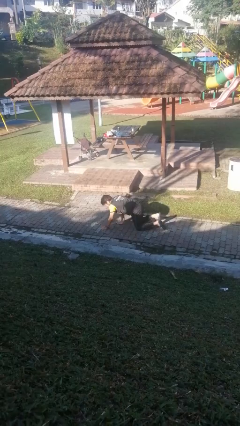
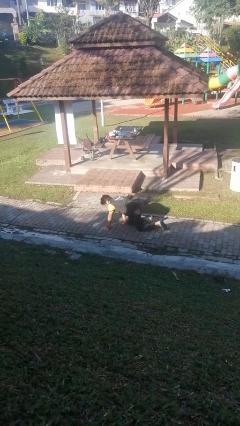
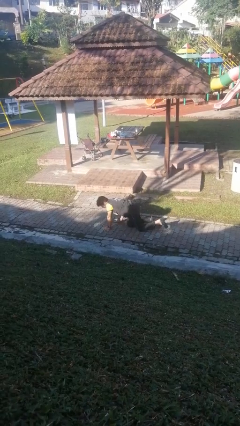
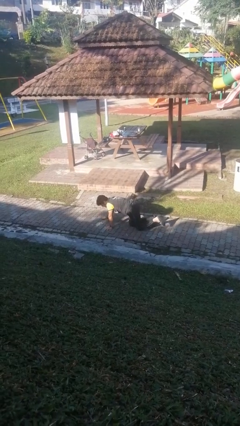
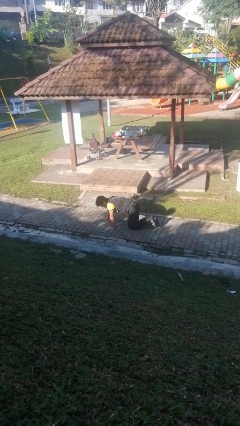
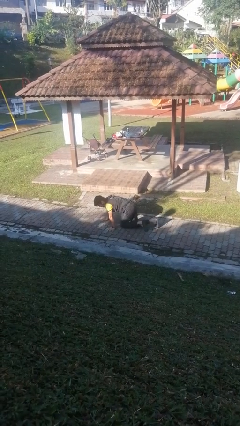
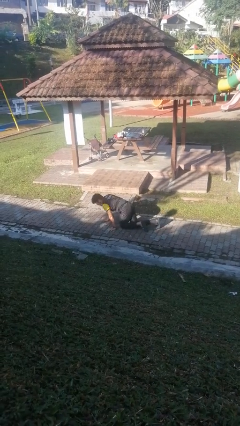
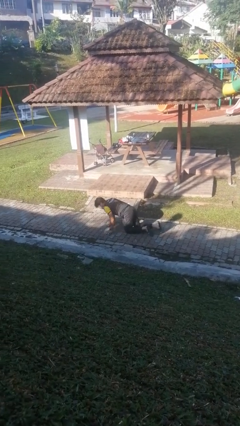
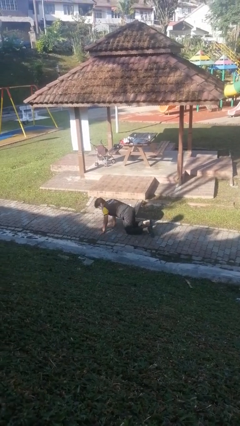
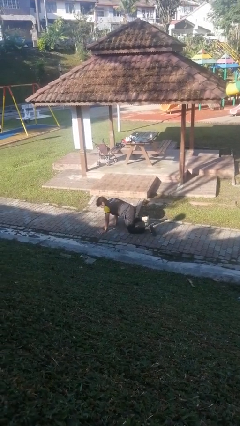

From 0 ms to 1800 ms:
person crawls

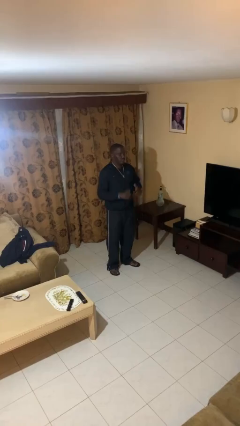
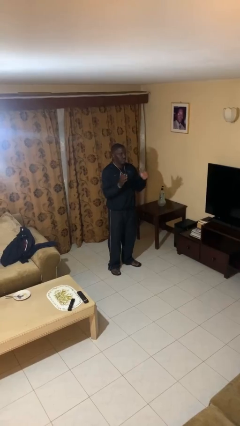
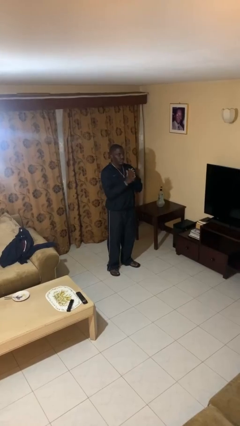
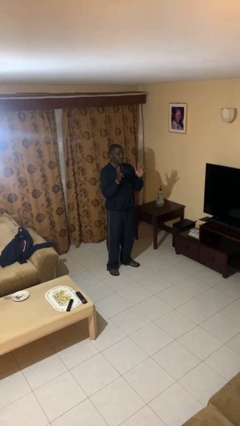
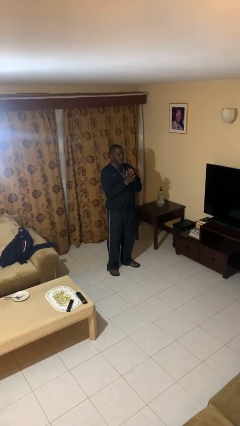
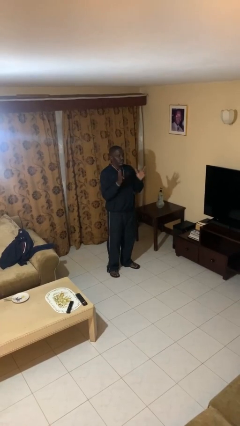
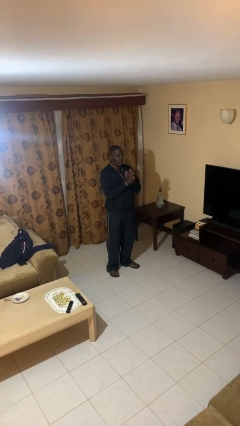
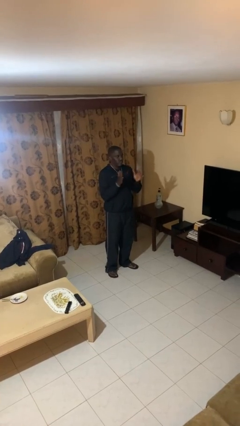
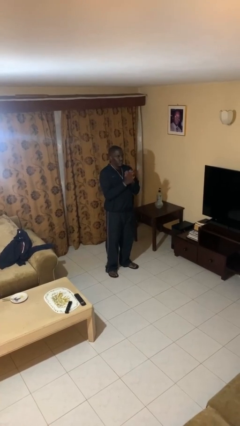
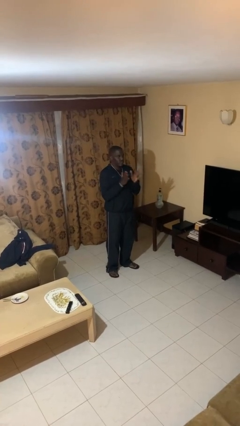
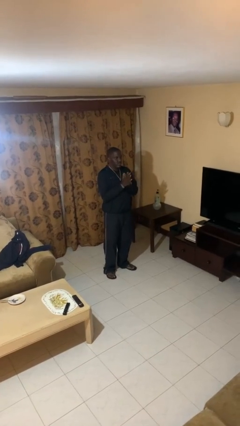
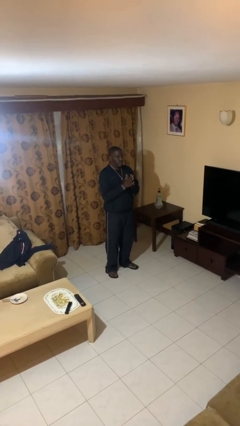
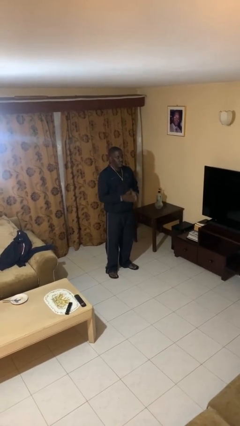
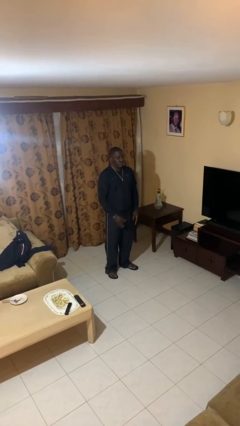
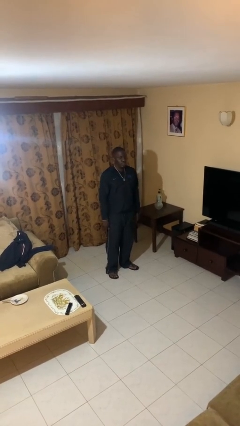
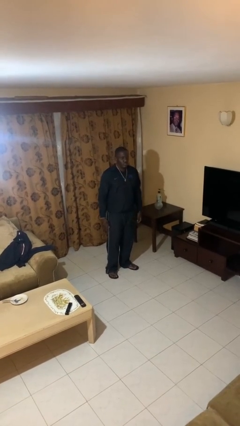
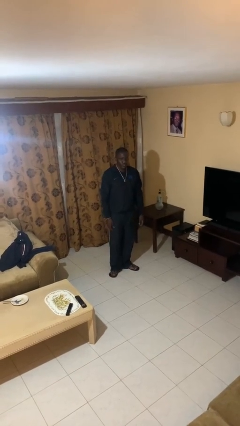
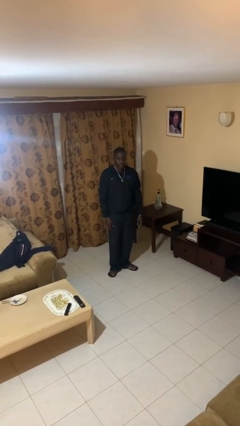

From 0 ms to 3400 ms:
person claps hands

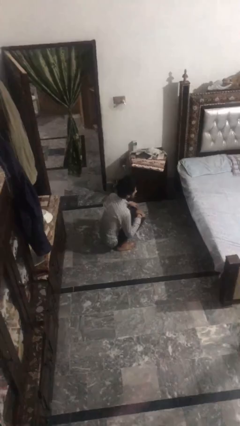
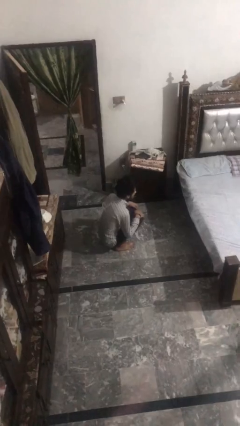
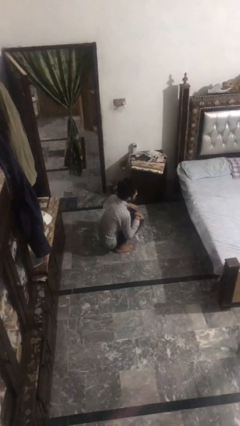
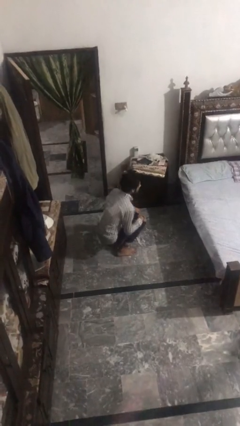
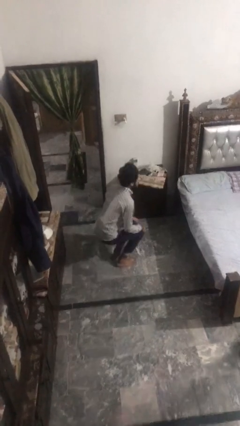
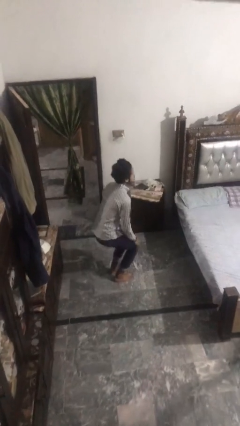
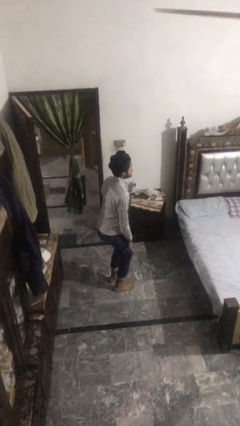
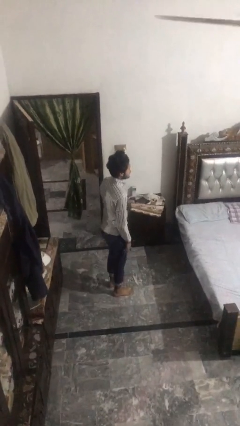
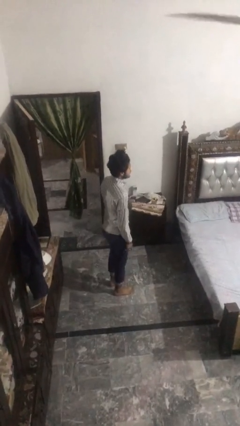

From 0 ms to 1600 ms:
person stands up

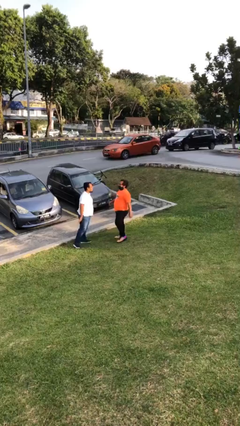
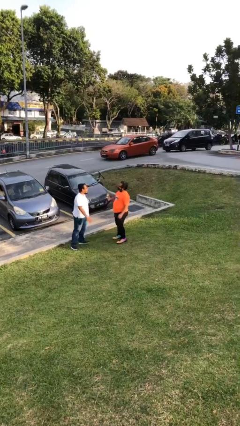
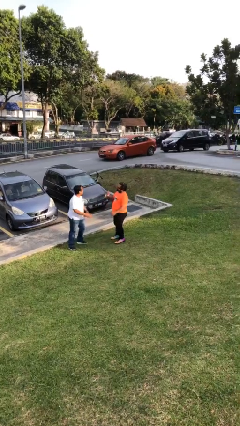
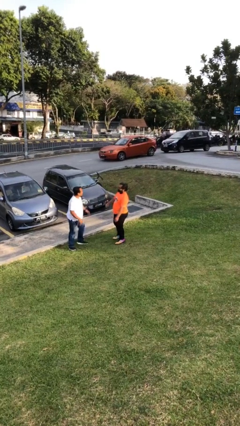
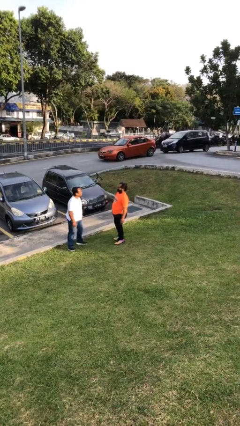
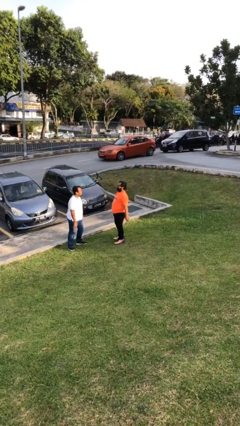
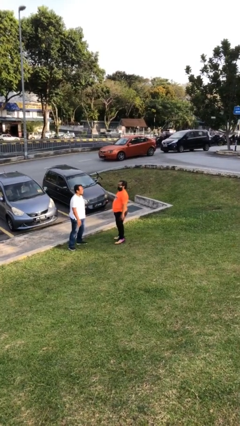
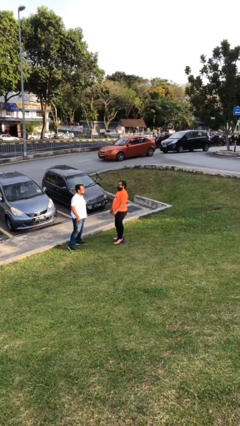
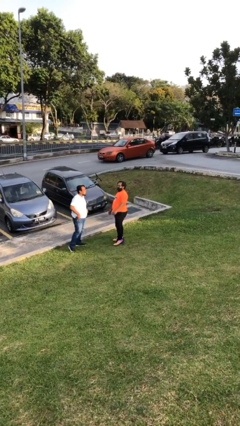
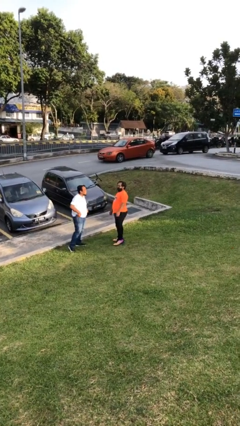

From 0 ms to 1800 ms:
person talks to person

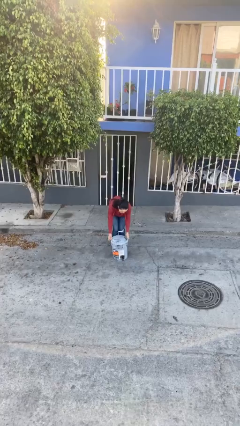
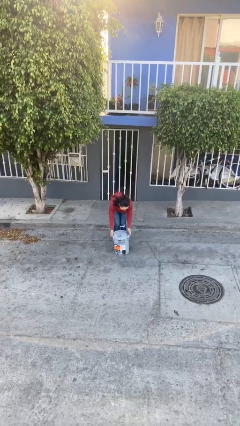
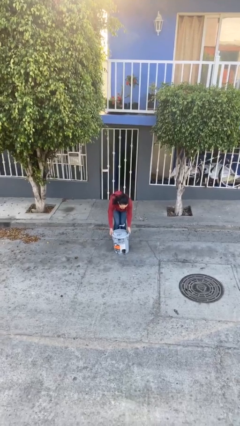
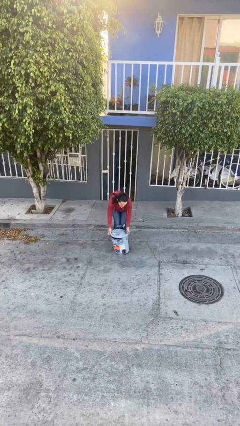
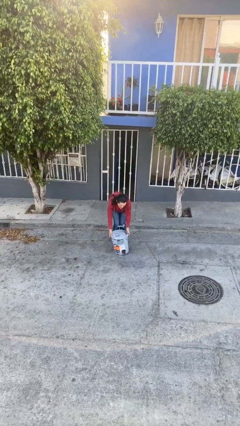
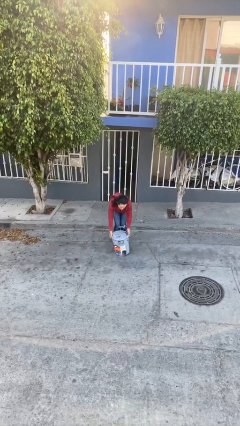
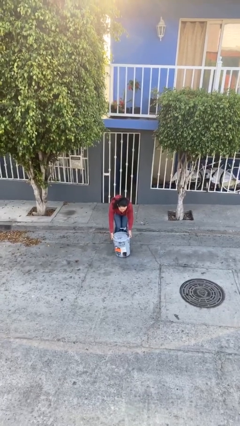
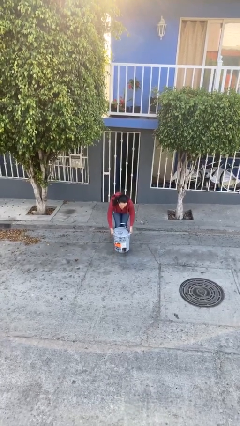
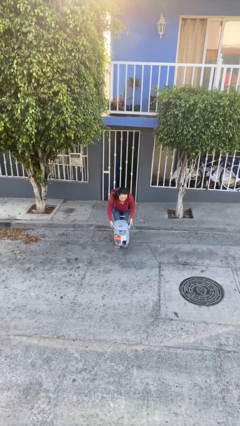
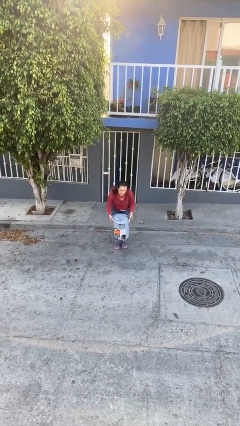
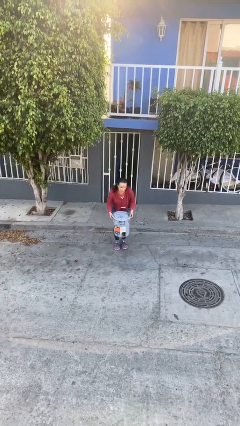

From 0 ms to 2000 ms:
person picks up object from floor

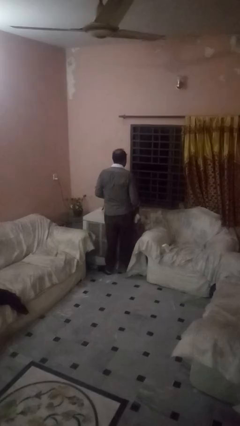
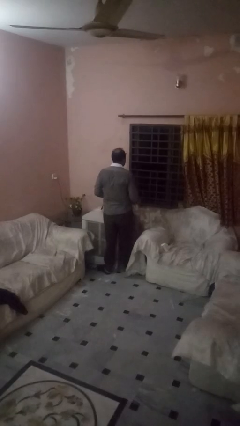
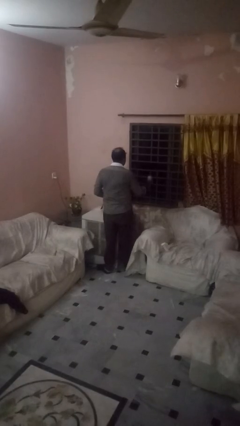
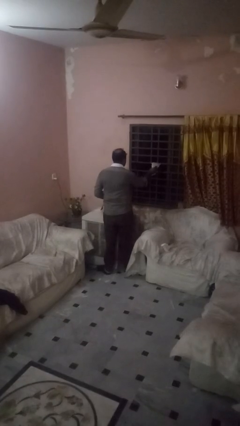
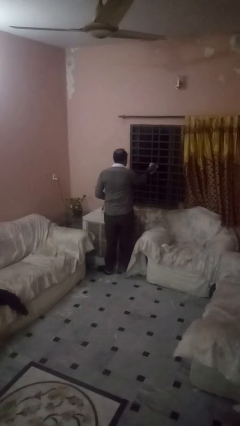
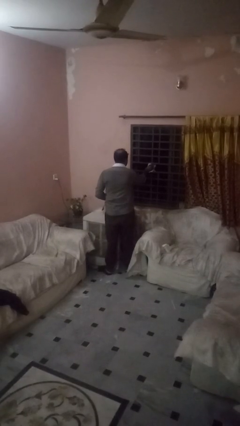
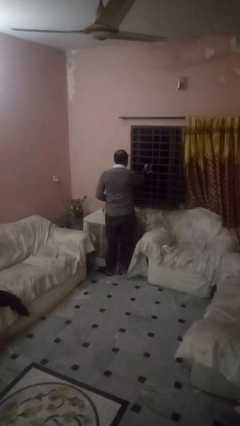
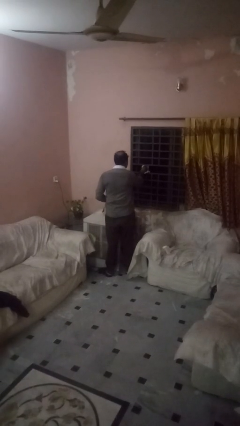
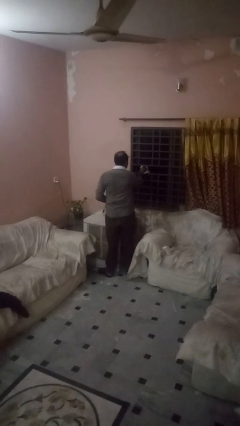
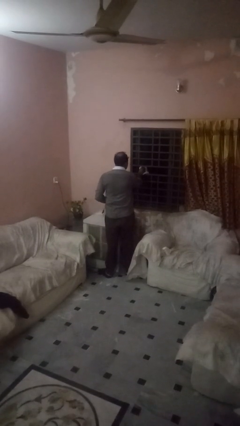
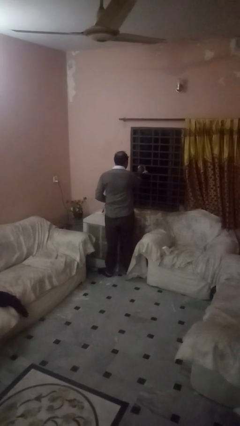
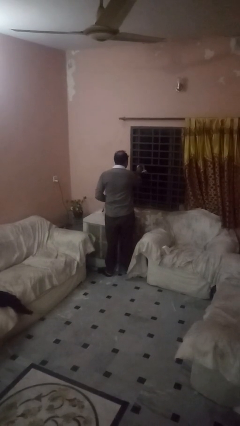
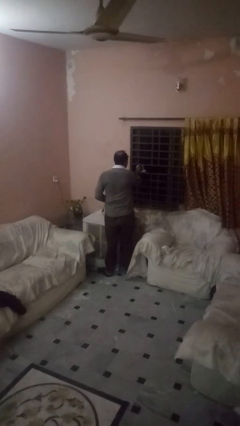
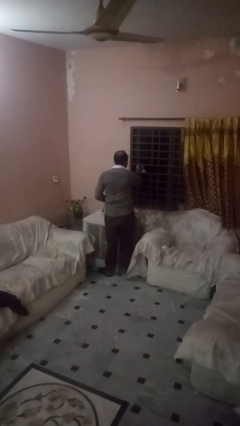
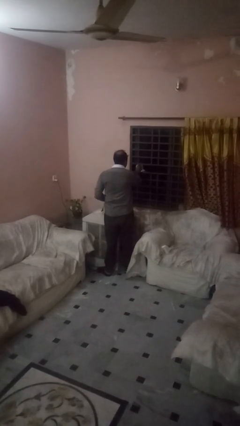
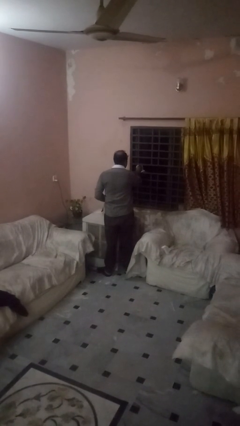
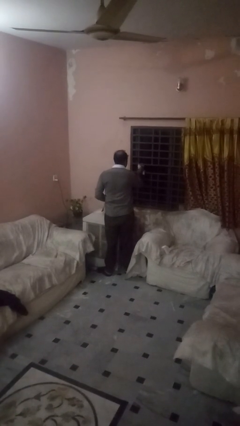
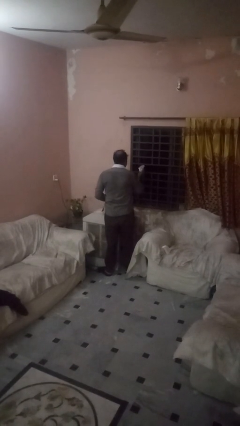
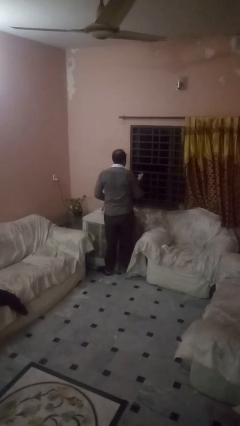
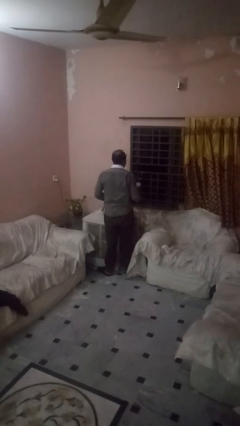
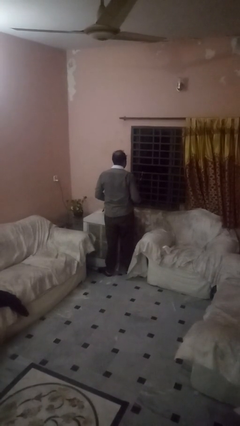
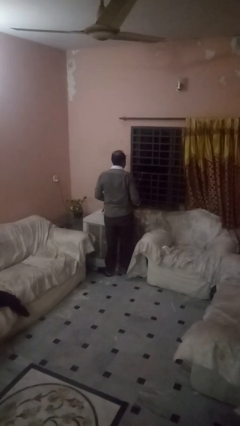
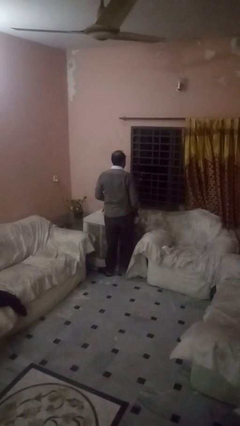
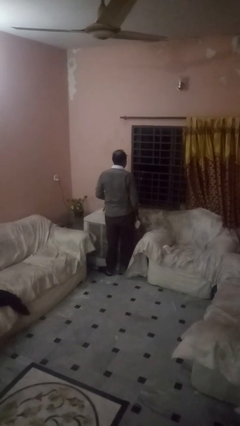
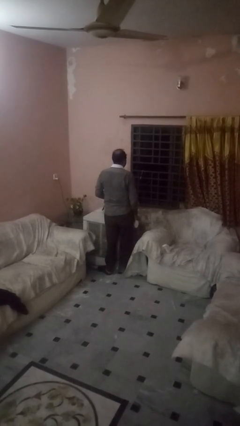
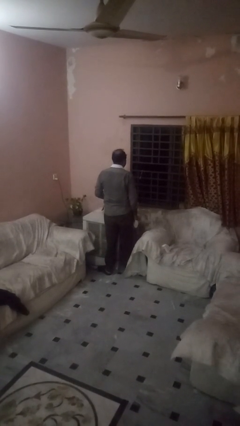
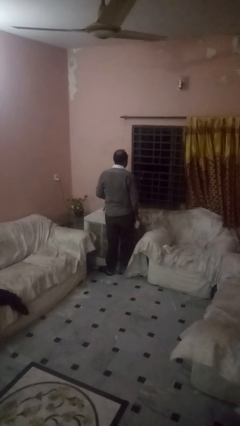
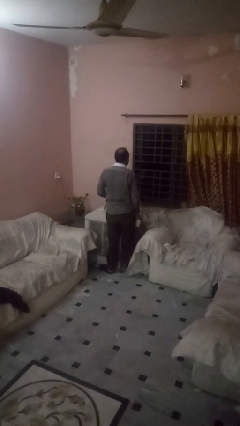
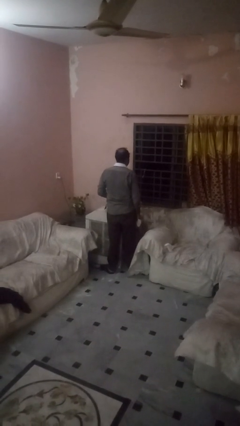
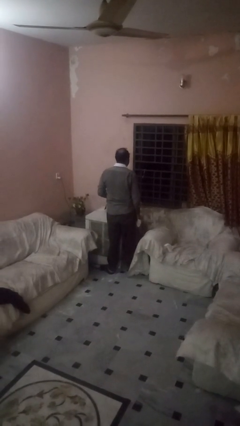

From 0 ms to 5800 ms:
person washes window

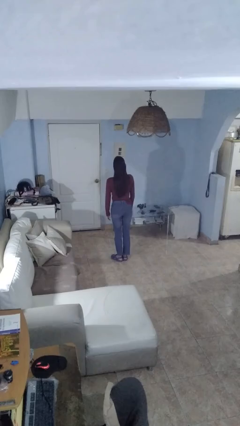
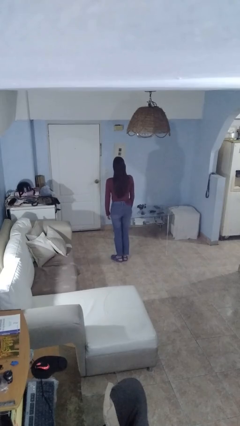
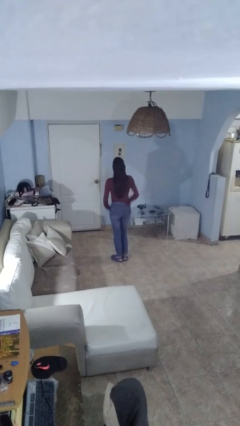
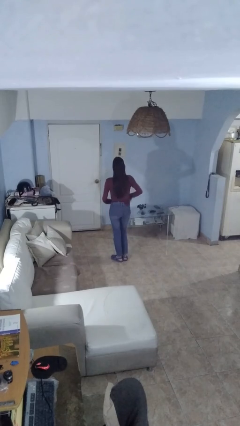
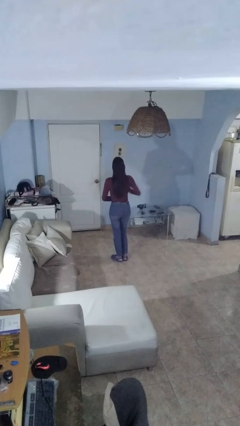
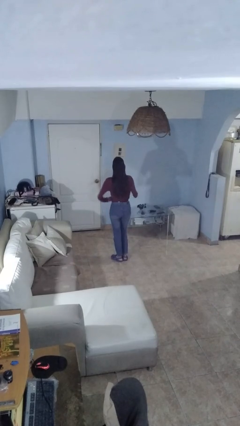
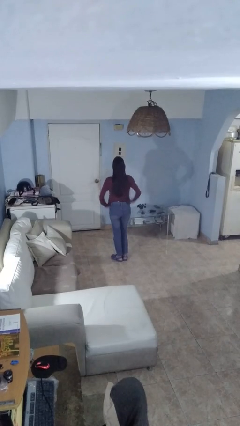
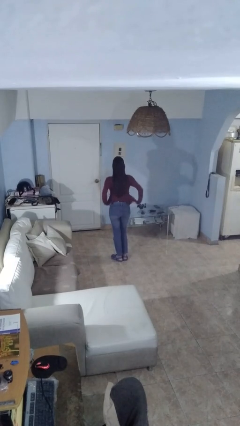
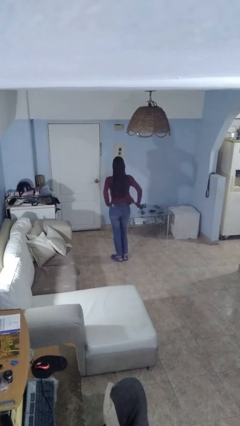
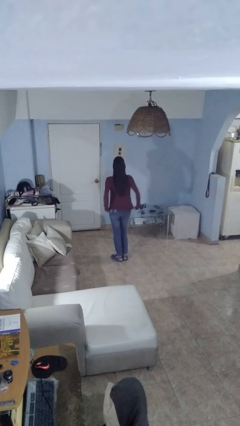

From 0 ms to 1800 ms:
person untucks shirt
